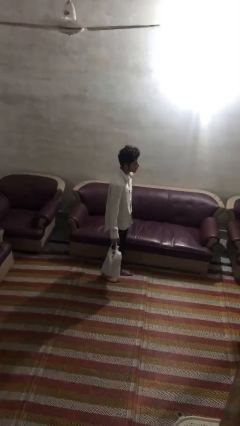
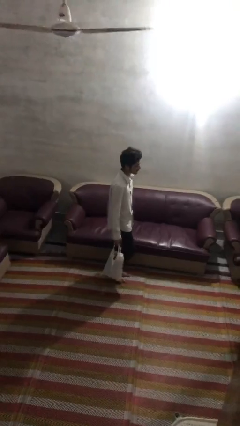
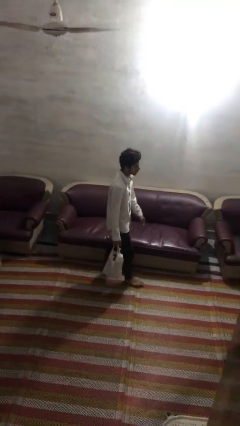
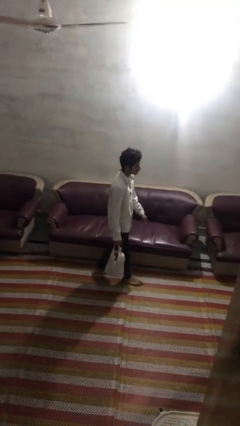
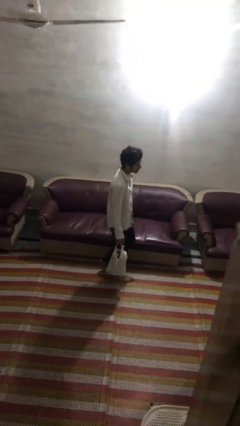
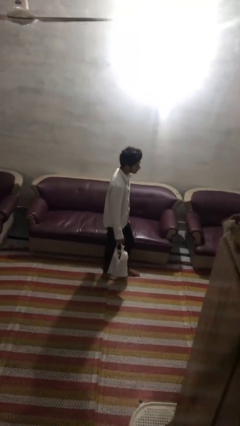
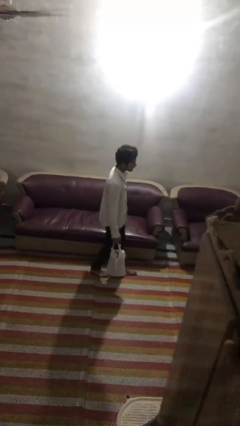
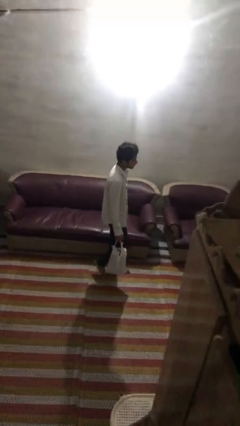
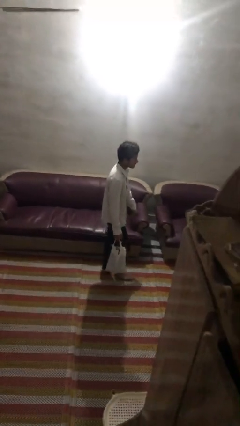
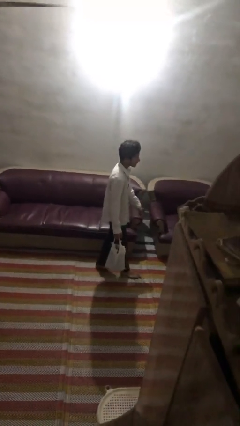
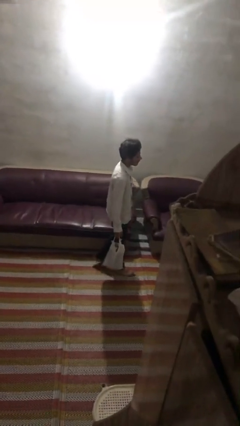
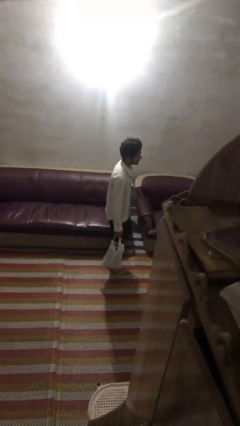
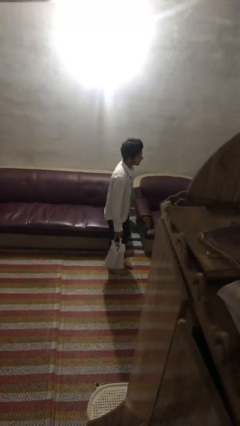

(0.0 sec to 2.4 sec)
person carries groceries

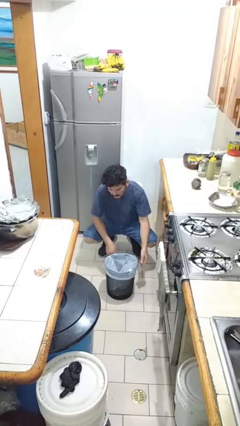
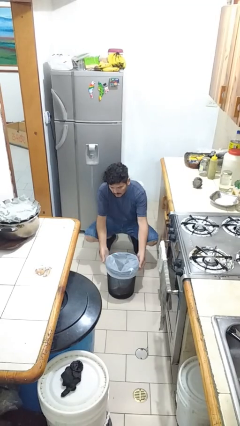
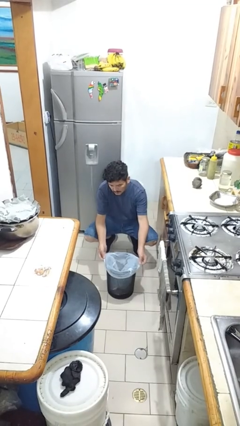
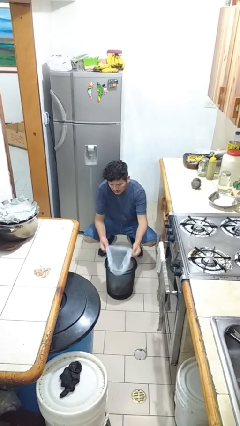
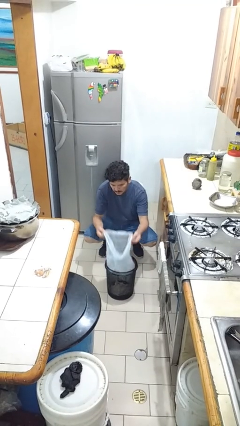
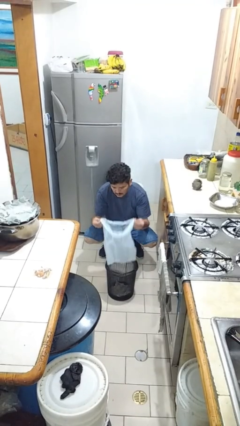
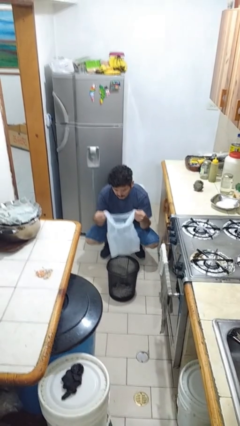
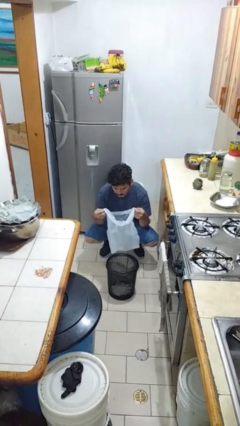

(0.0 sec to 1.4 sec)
person removes trashbag from trashcan

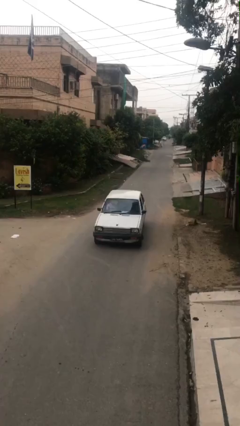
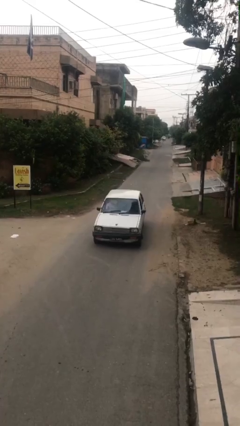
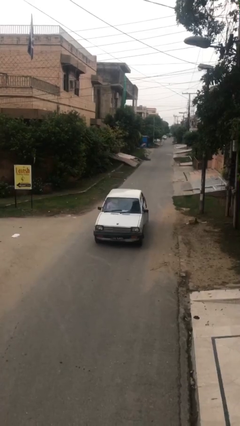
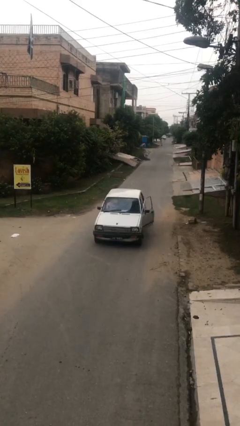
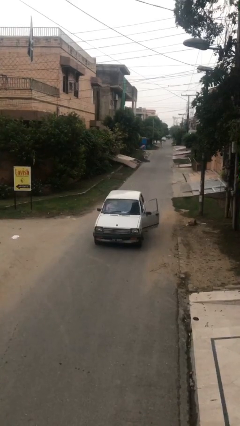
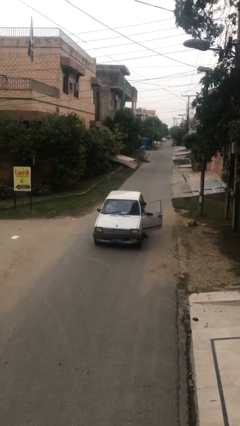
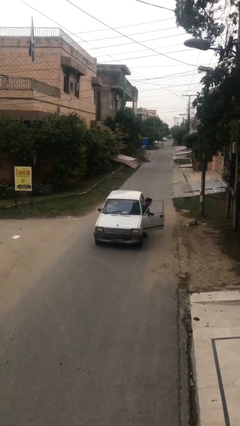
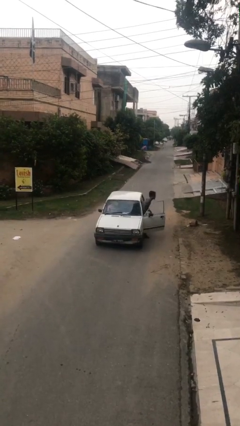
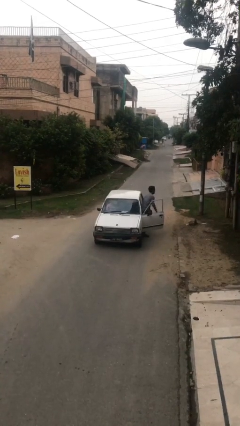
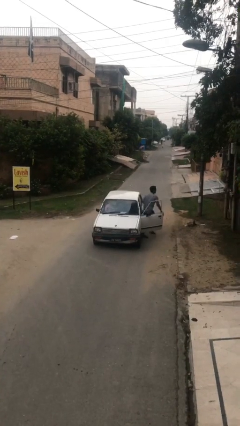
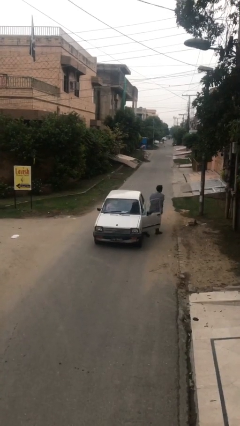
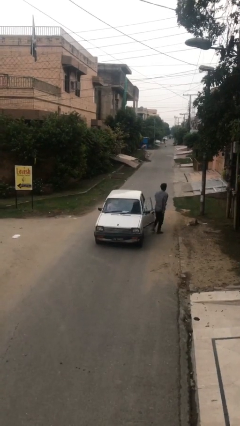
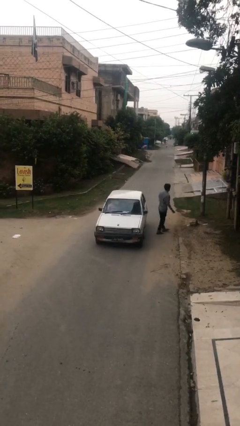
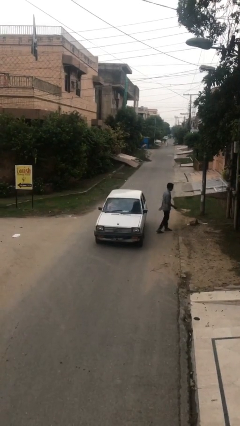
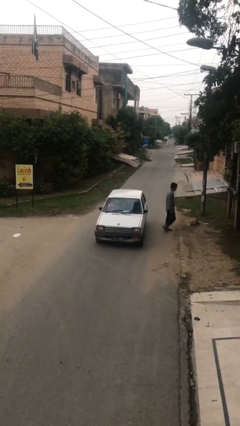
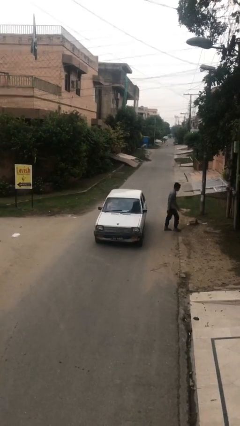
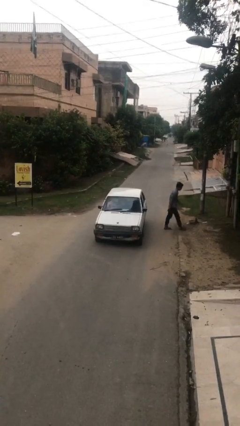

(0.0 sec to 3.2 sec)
car drops off person

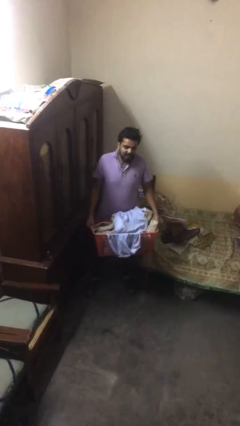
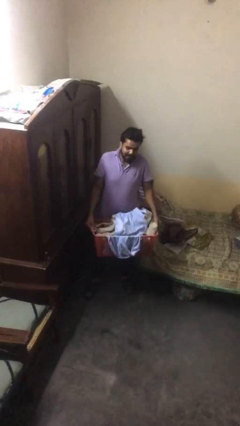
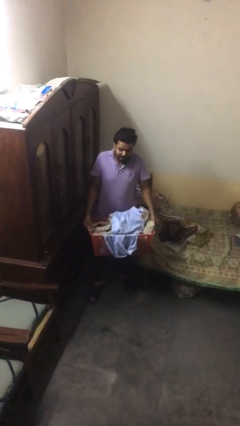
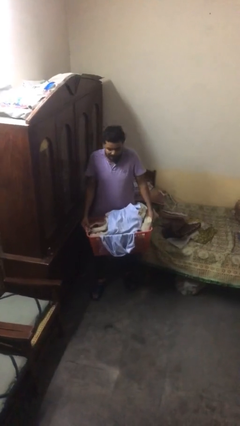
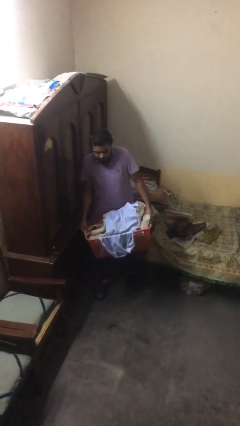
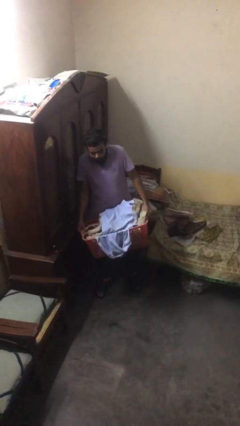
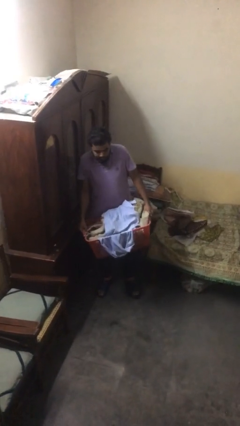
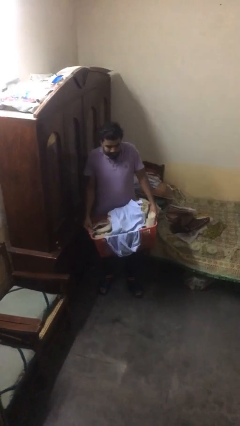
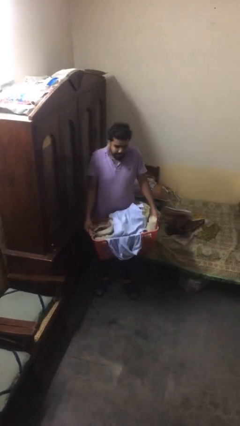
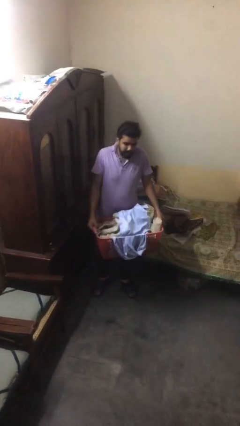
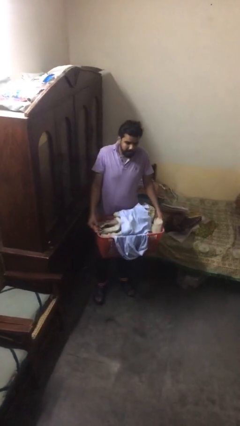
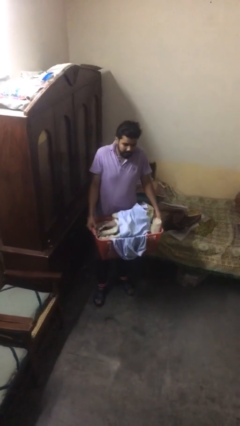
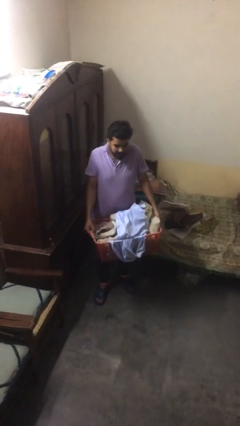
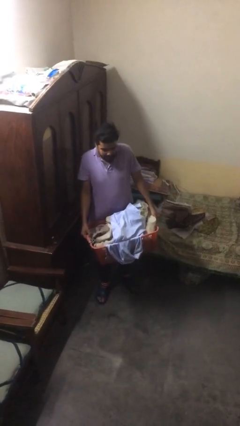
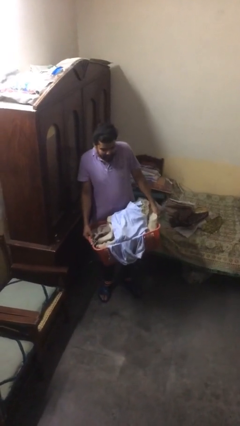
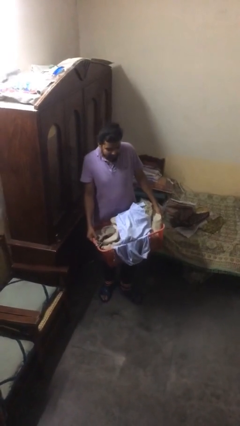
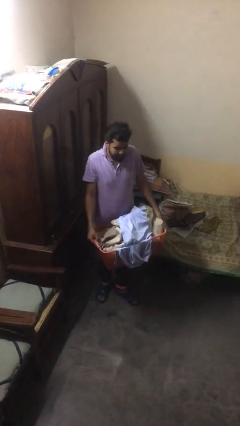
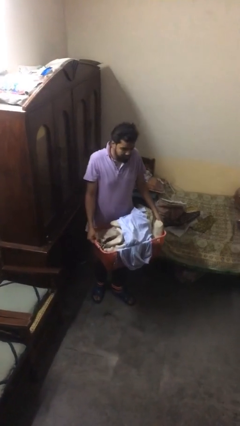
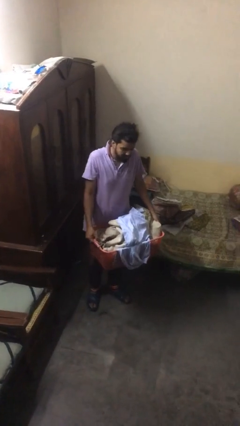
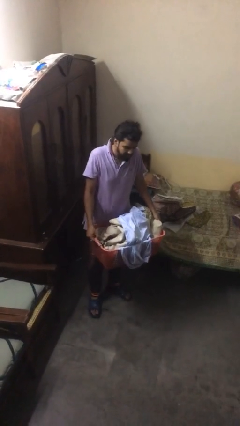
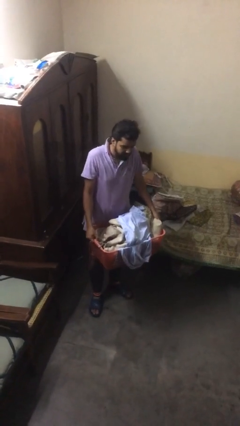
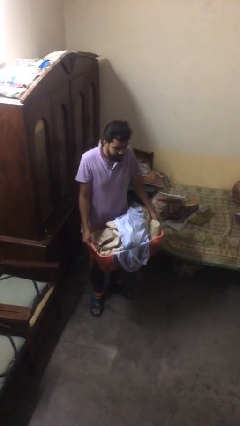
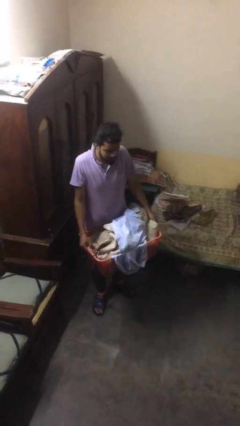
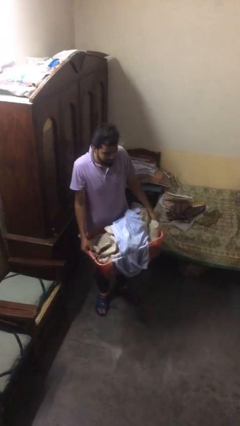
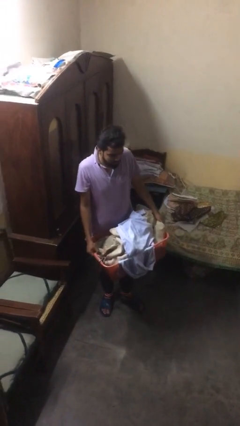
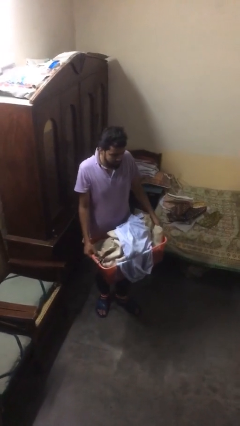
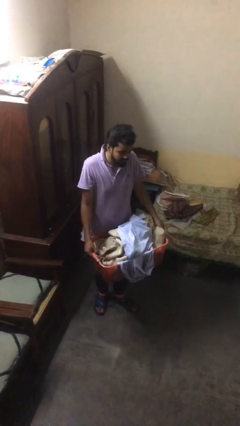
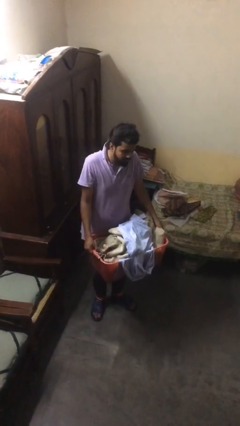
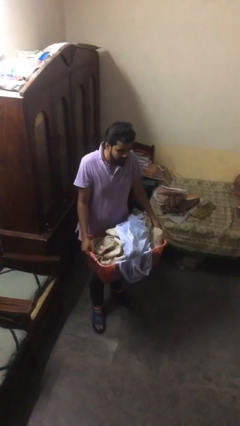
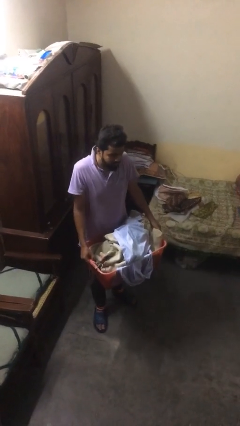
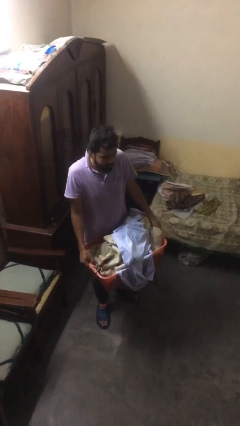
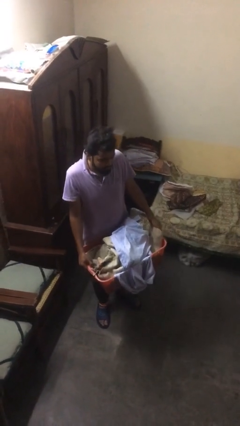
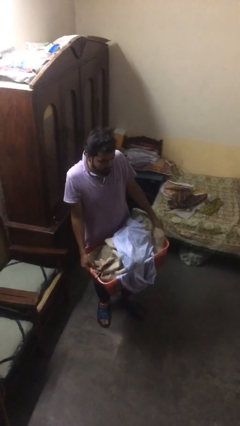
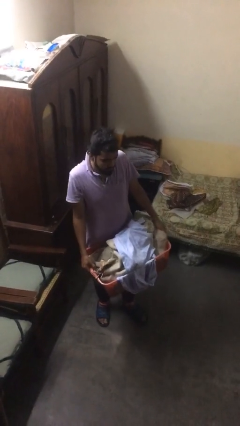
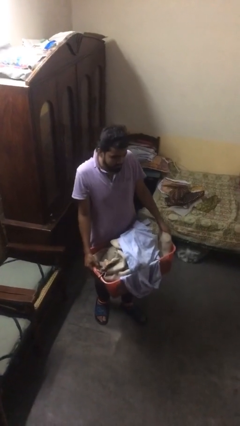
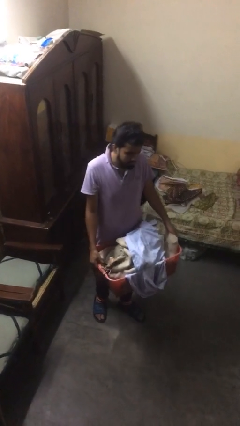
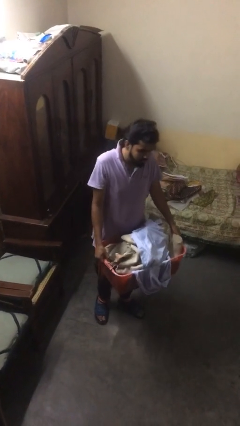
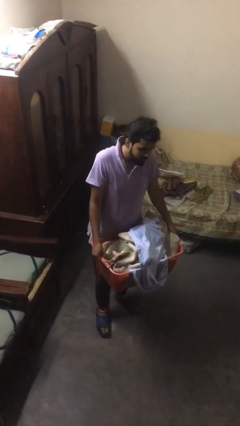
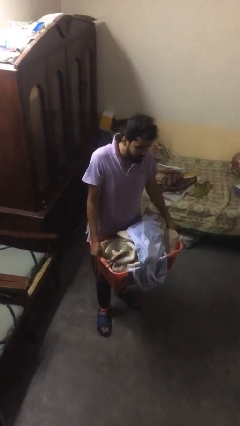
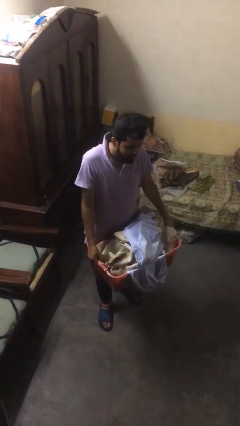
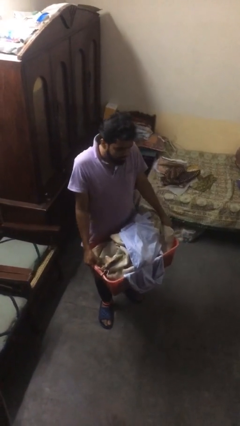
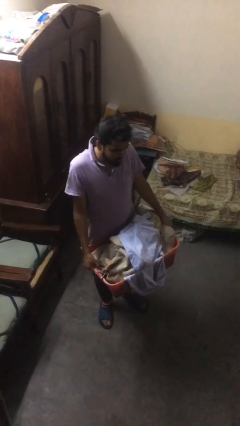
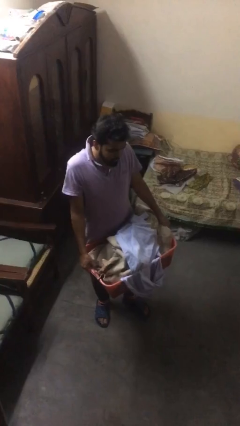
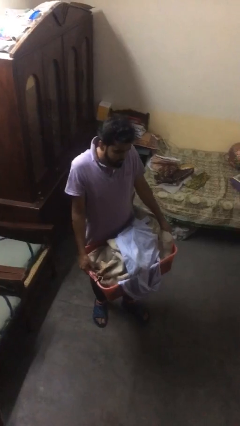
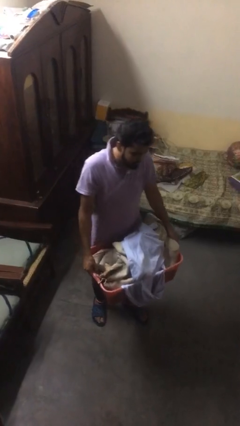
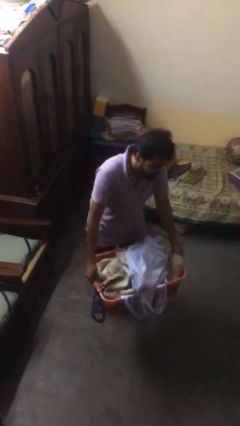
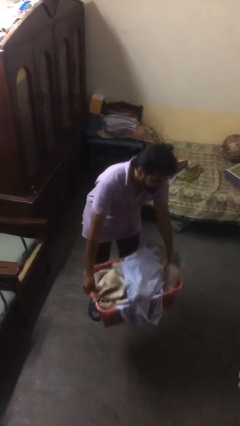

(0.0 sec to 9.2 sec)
person carries heavy object

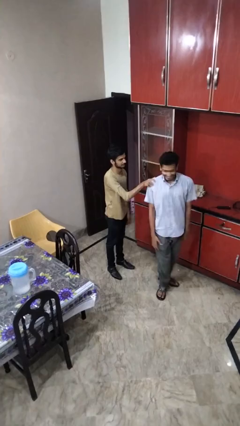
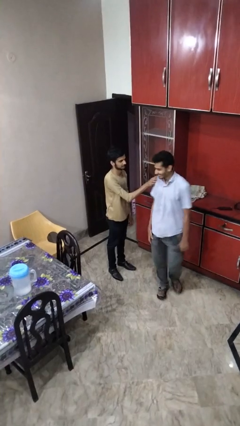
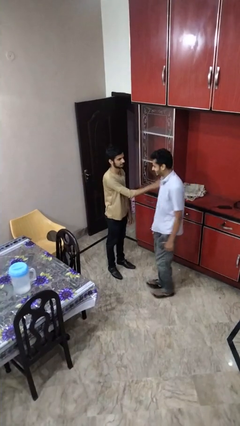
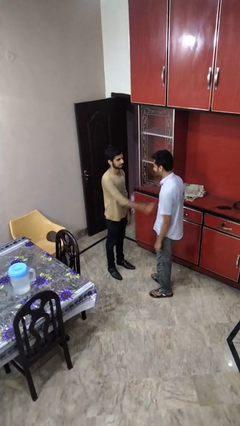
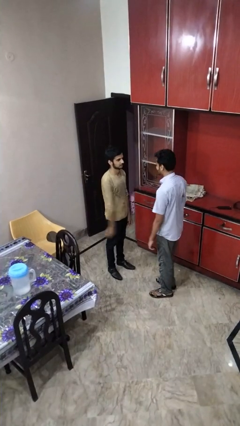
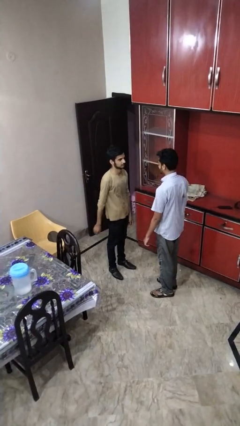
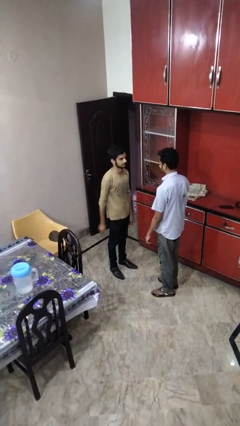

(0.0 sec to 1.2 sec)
person spins person around

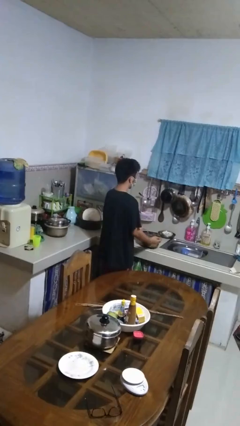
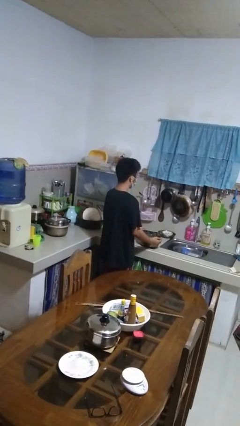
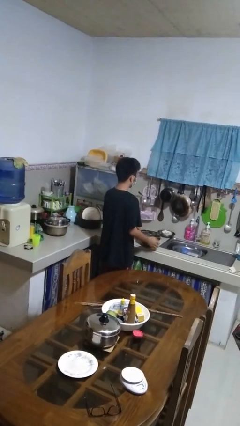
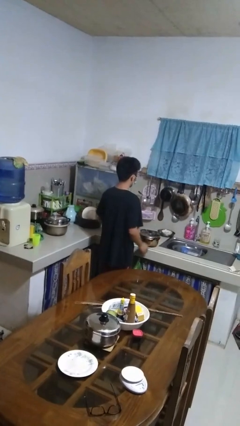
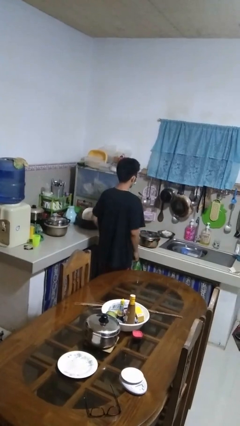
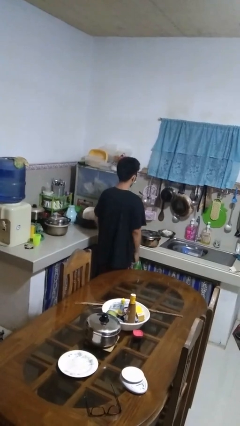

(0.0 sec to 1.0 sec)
person puts down object on countertop
